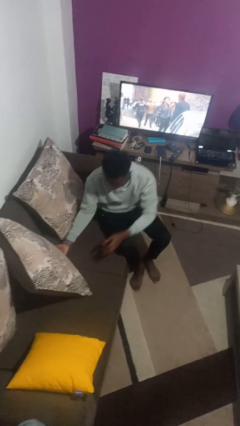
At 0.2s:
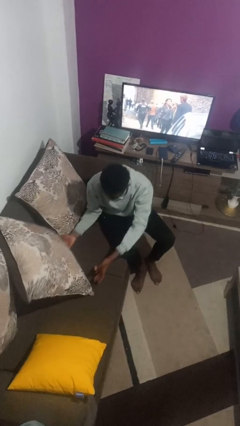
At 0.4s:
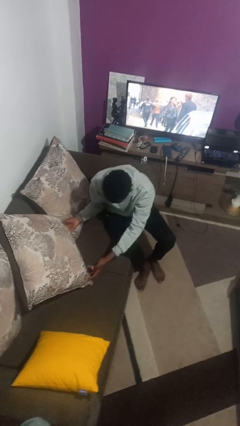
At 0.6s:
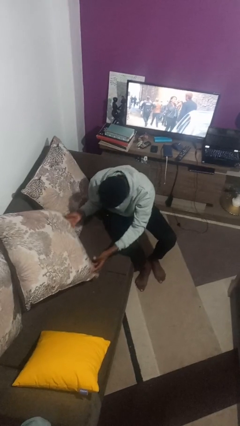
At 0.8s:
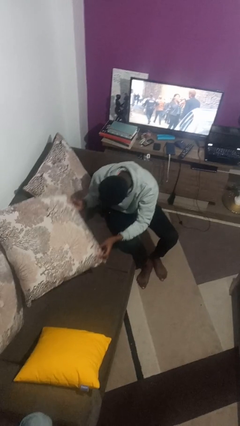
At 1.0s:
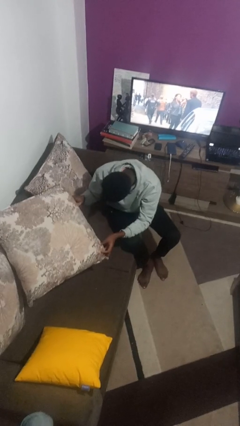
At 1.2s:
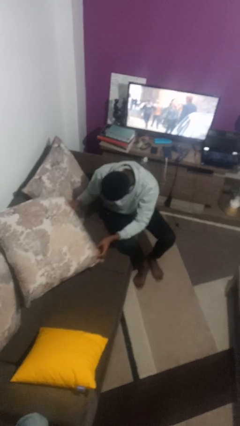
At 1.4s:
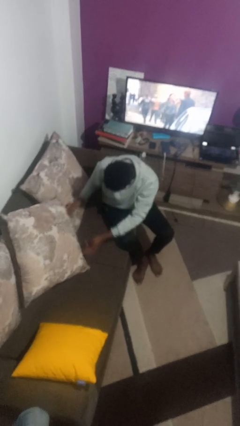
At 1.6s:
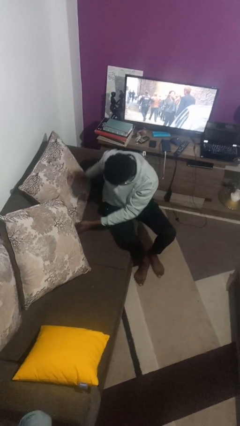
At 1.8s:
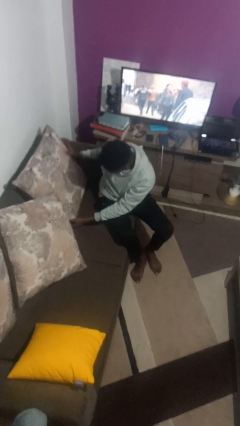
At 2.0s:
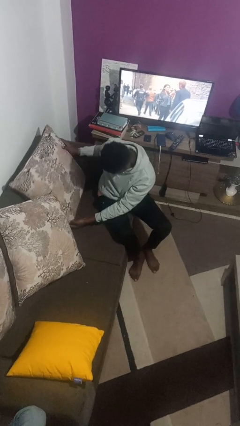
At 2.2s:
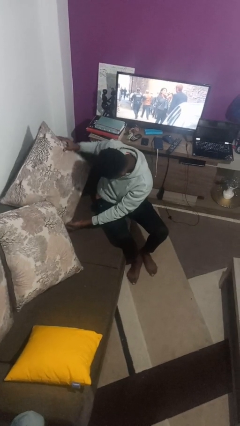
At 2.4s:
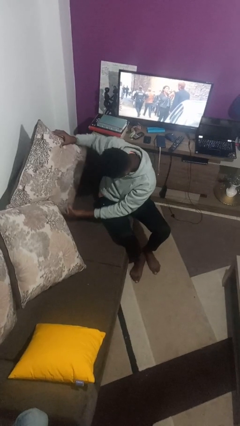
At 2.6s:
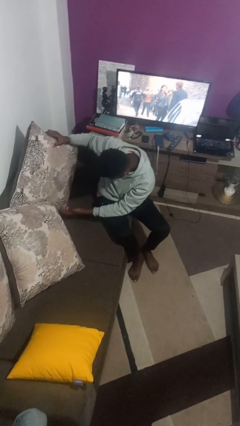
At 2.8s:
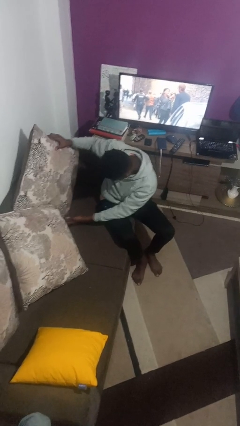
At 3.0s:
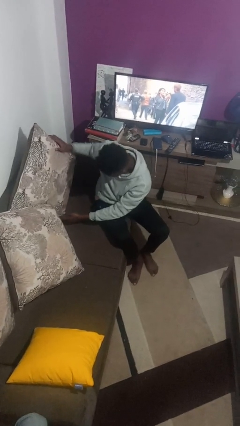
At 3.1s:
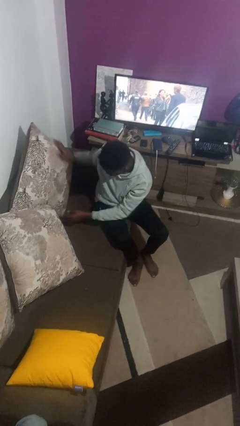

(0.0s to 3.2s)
person searches in couch

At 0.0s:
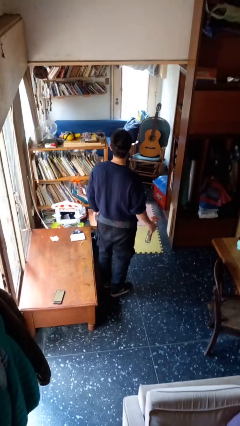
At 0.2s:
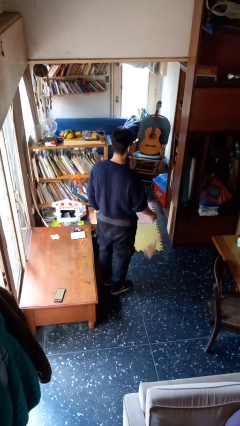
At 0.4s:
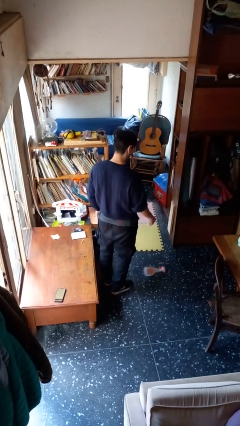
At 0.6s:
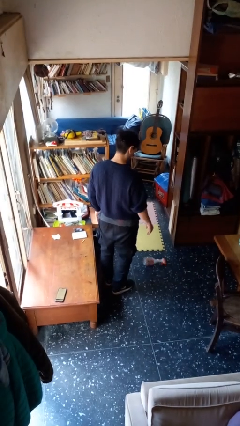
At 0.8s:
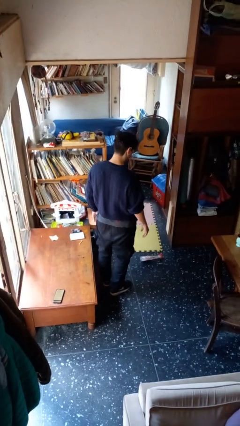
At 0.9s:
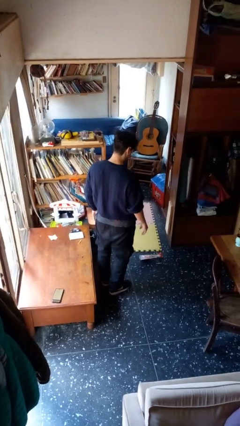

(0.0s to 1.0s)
person drops object

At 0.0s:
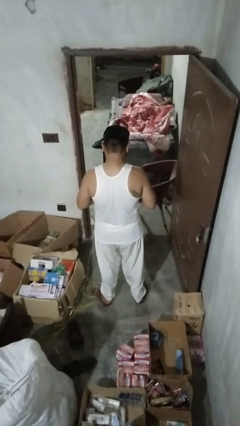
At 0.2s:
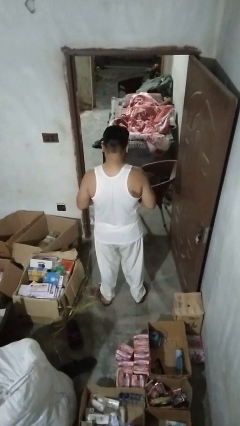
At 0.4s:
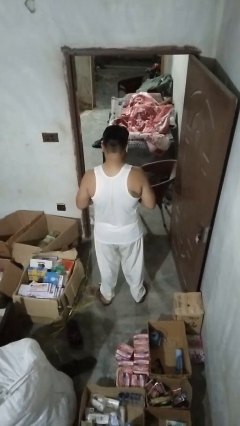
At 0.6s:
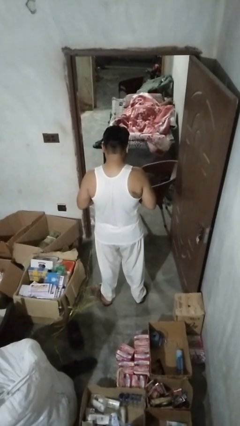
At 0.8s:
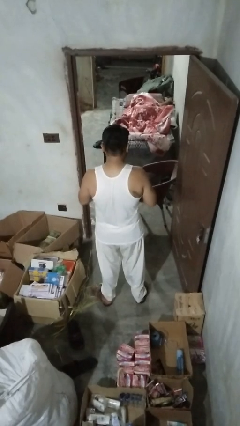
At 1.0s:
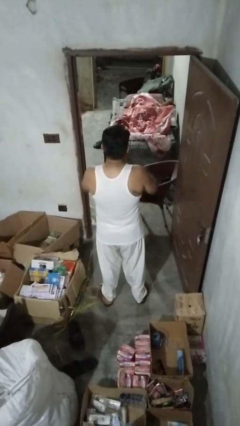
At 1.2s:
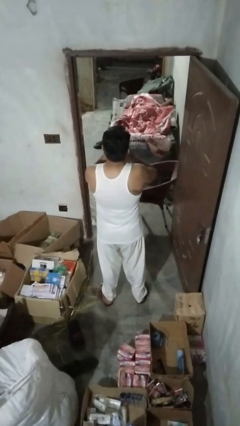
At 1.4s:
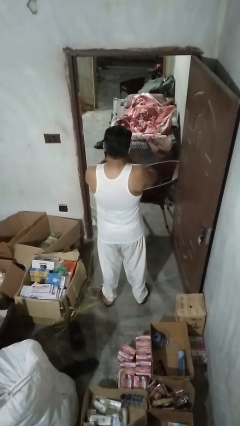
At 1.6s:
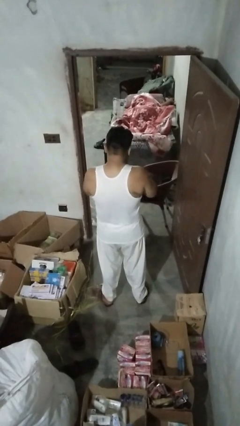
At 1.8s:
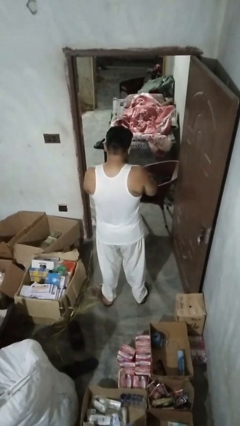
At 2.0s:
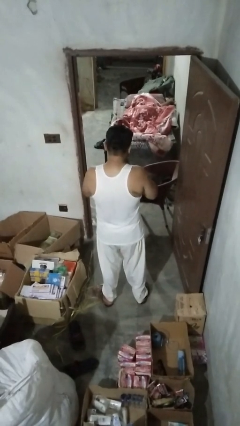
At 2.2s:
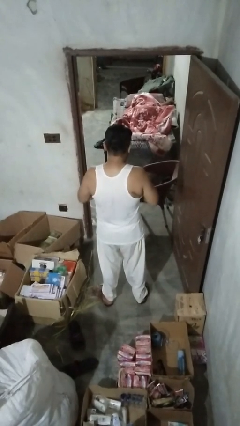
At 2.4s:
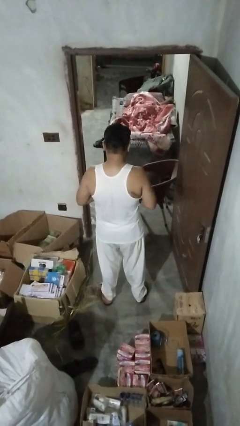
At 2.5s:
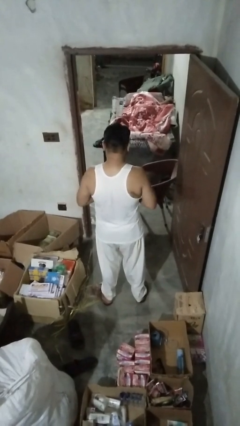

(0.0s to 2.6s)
person sneezes into hand

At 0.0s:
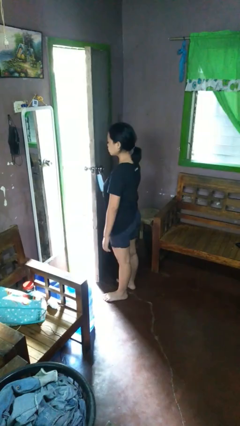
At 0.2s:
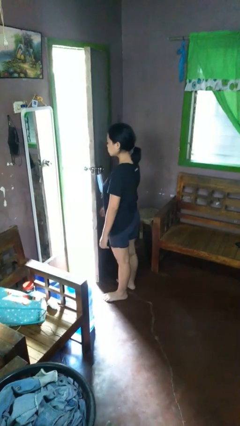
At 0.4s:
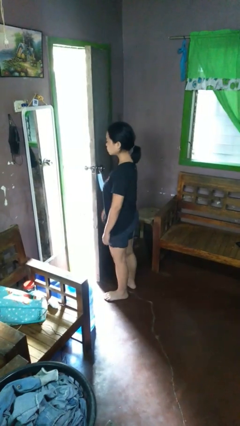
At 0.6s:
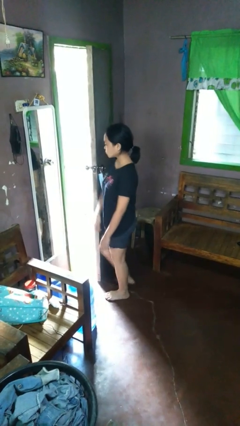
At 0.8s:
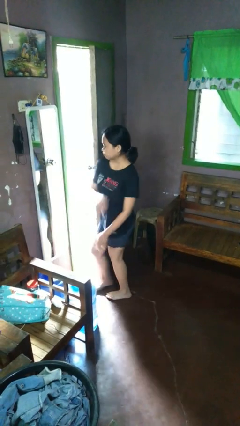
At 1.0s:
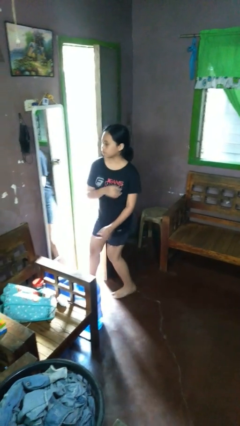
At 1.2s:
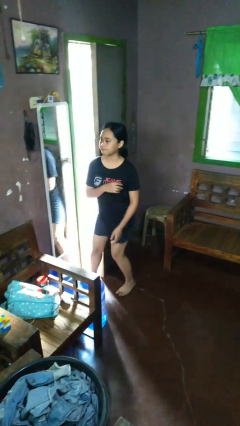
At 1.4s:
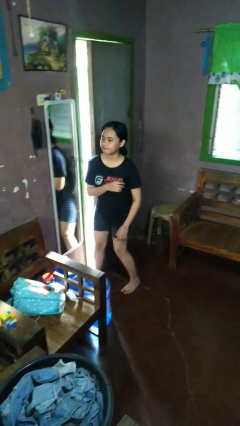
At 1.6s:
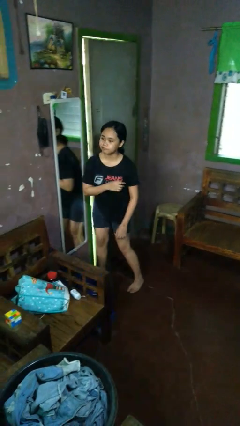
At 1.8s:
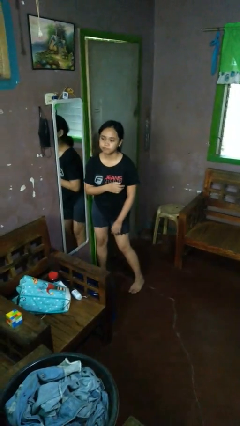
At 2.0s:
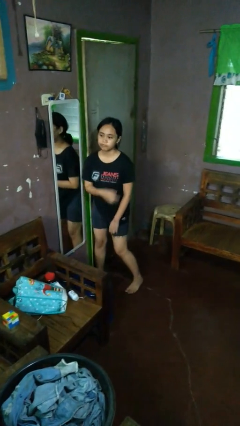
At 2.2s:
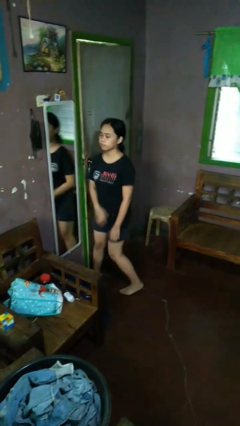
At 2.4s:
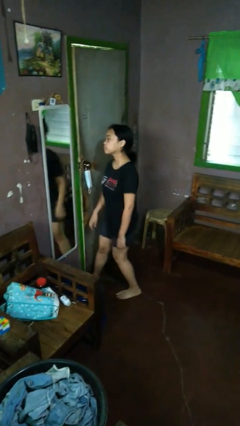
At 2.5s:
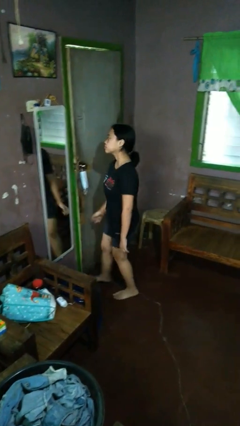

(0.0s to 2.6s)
person closes door with hip

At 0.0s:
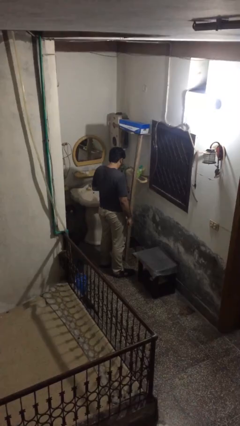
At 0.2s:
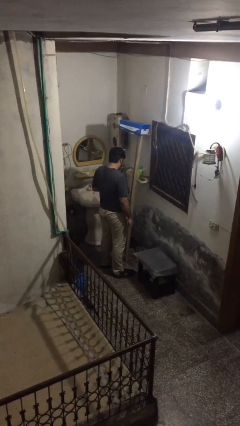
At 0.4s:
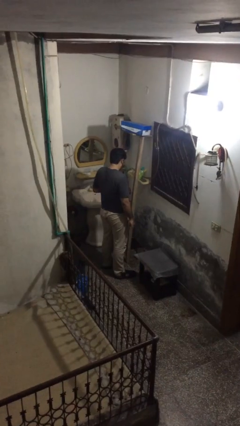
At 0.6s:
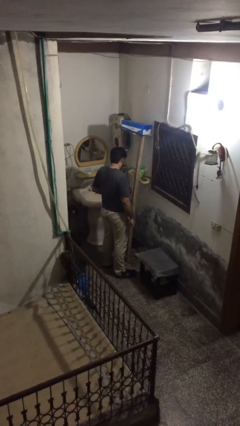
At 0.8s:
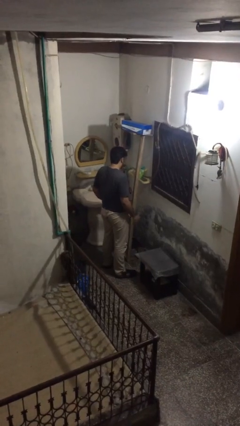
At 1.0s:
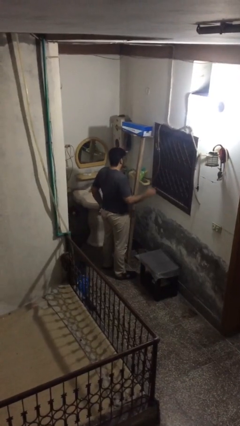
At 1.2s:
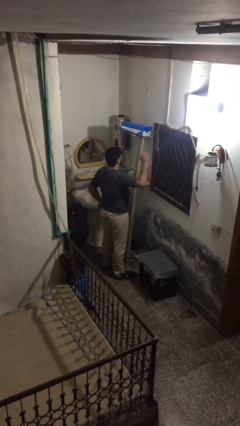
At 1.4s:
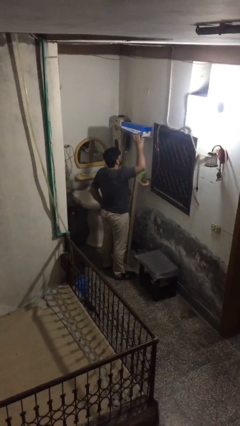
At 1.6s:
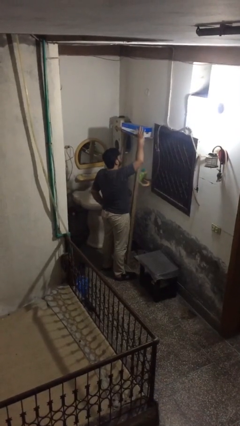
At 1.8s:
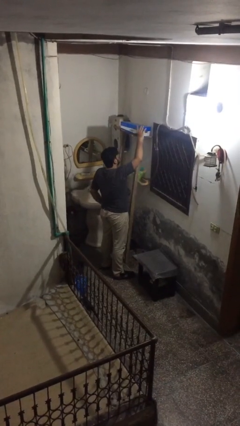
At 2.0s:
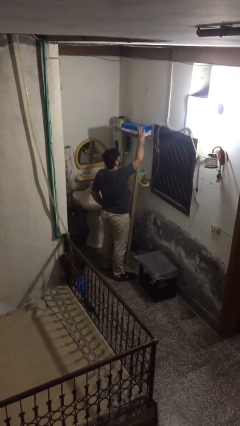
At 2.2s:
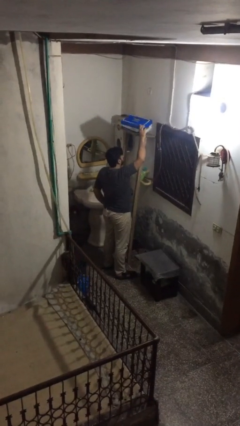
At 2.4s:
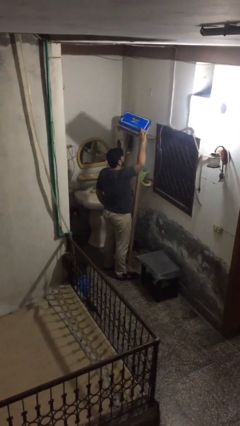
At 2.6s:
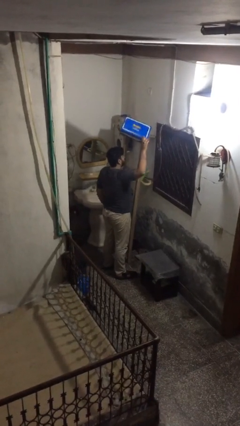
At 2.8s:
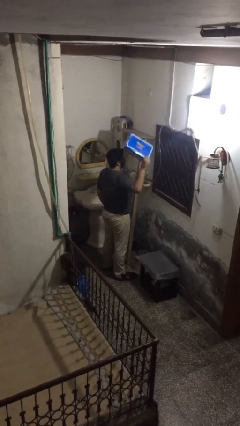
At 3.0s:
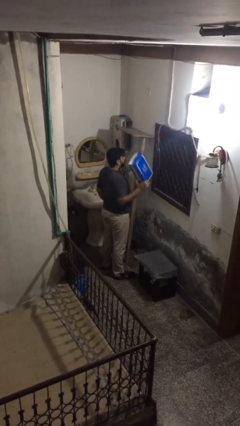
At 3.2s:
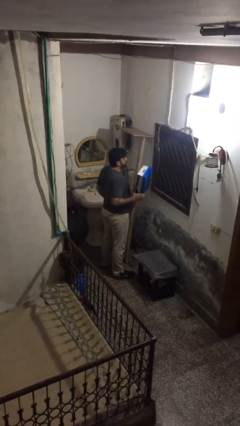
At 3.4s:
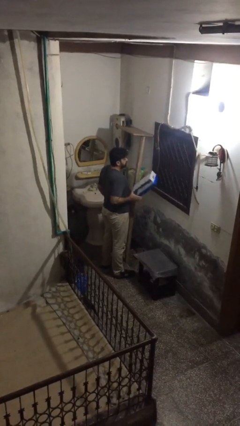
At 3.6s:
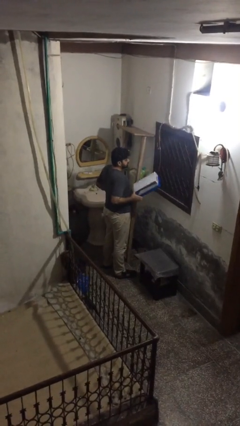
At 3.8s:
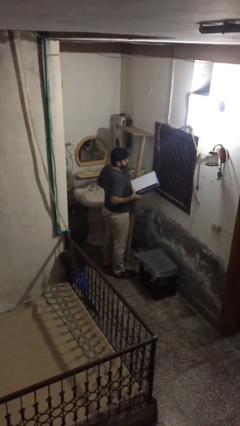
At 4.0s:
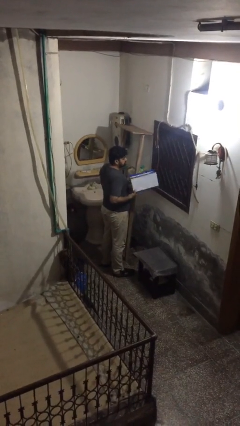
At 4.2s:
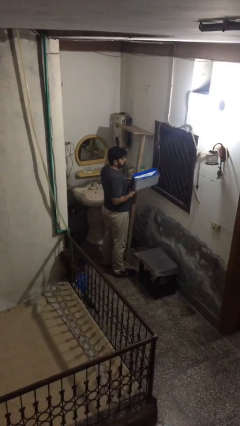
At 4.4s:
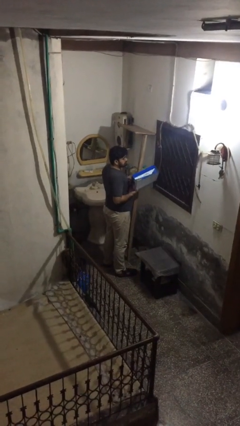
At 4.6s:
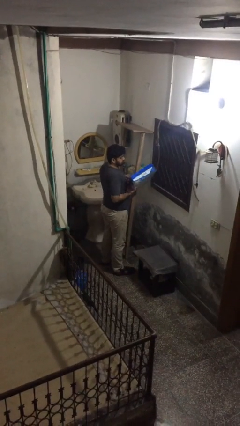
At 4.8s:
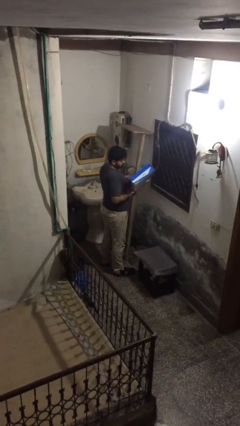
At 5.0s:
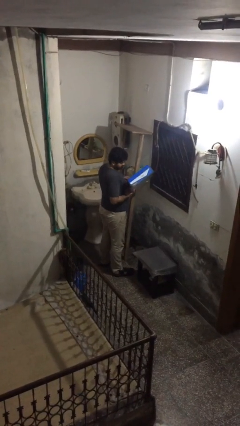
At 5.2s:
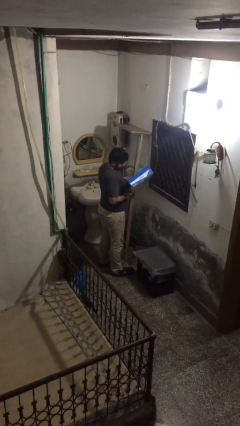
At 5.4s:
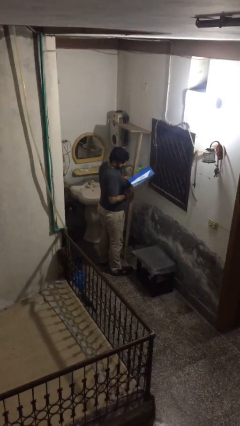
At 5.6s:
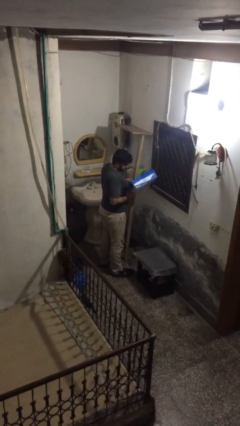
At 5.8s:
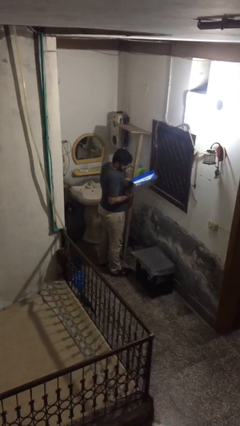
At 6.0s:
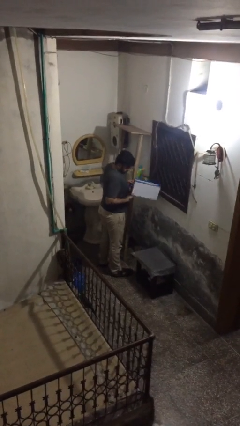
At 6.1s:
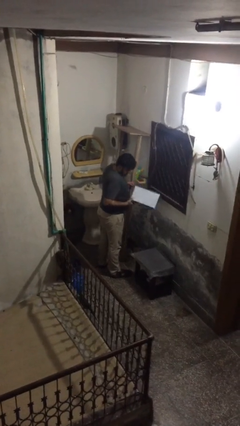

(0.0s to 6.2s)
person picks up object from shelf

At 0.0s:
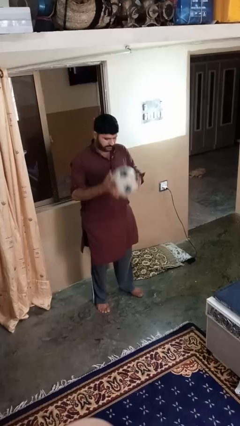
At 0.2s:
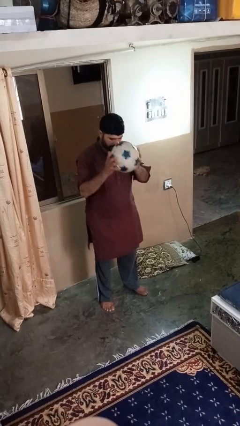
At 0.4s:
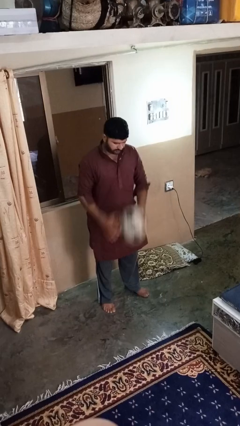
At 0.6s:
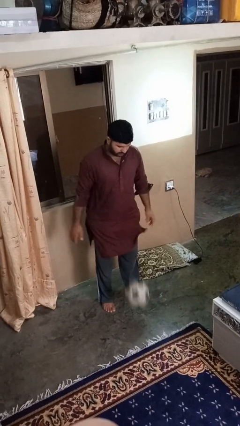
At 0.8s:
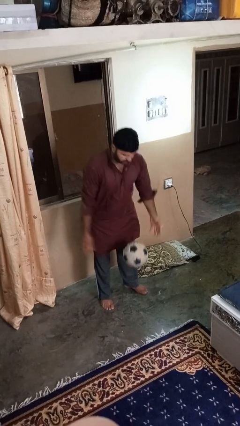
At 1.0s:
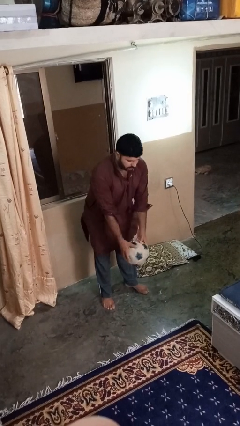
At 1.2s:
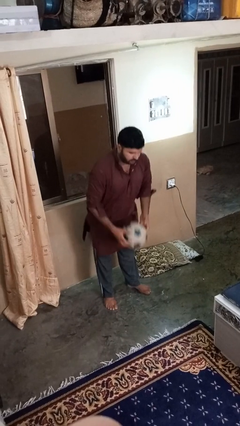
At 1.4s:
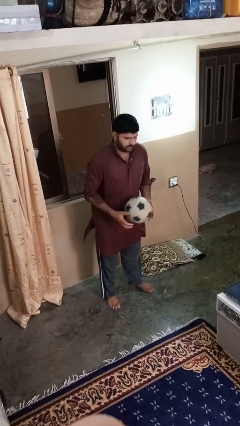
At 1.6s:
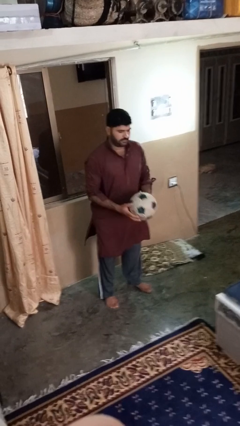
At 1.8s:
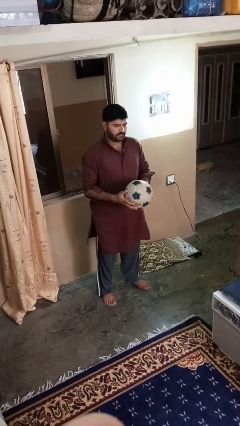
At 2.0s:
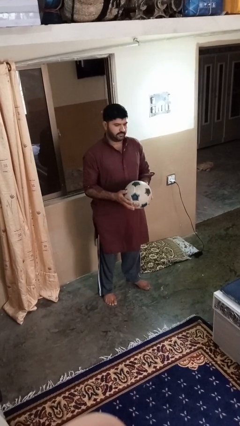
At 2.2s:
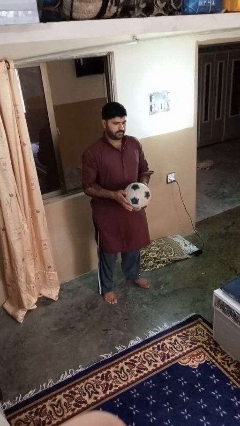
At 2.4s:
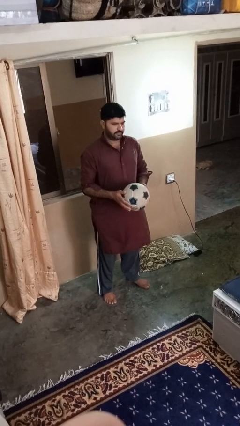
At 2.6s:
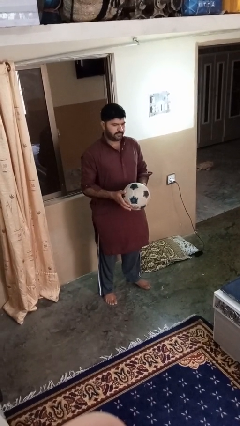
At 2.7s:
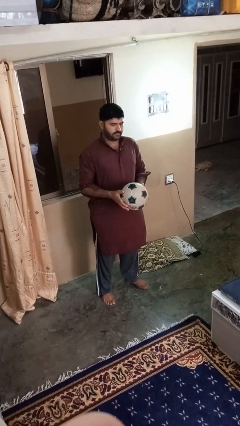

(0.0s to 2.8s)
person bounces ball on floor
